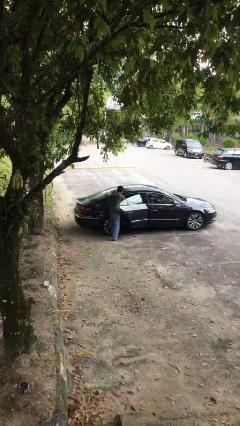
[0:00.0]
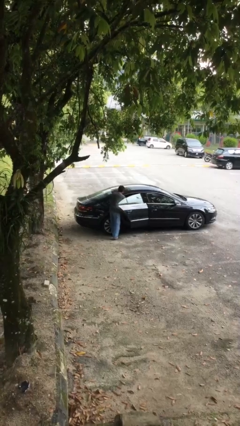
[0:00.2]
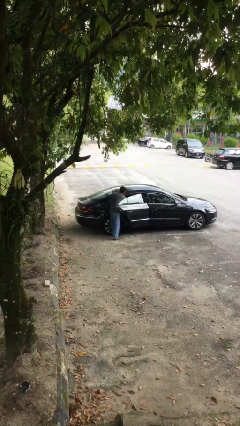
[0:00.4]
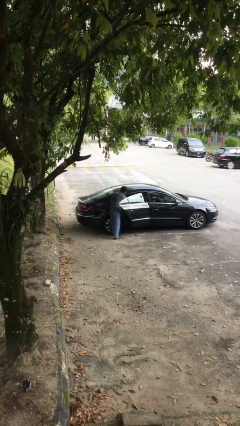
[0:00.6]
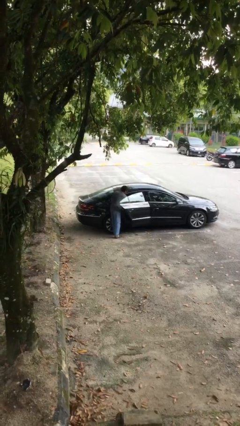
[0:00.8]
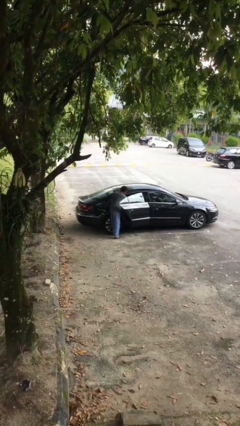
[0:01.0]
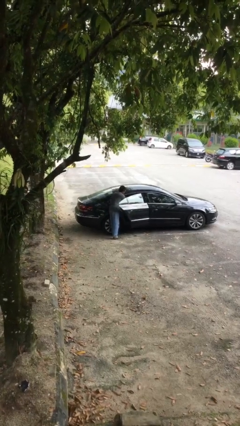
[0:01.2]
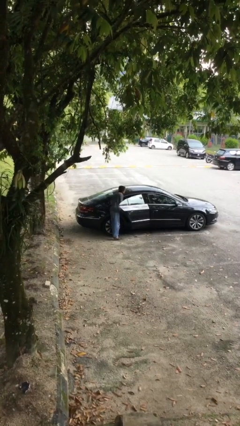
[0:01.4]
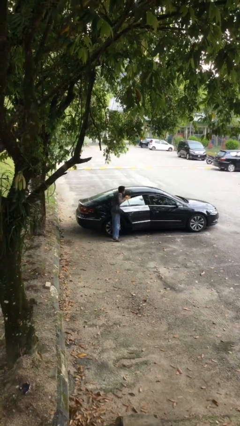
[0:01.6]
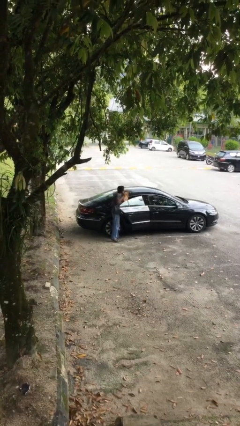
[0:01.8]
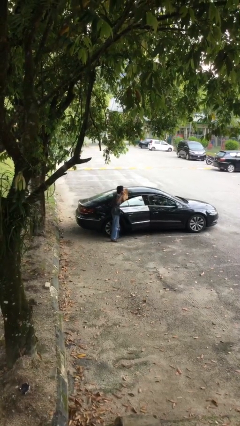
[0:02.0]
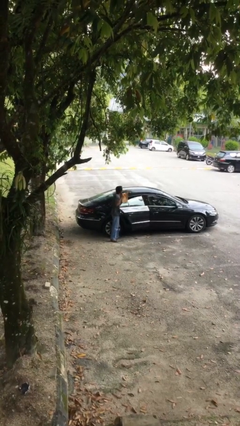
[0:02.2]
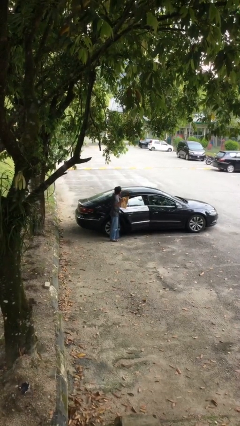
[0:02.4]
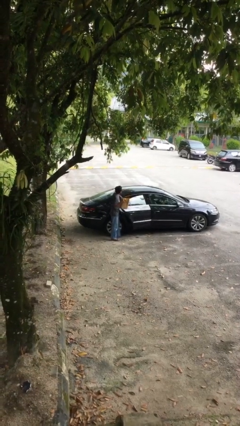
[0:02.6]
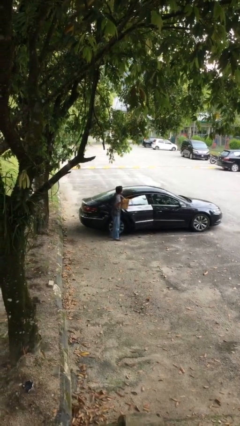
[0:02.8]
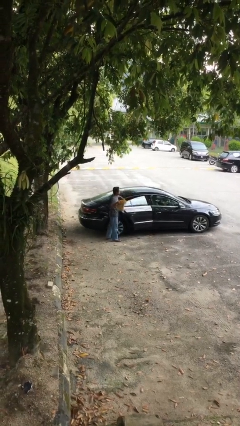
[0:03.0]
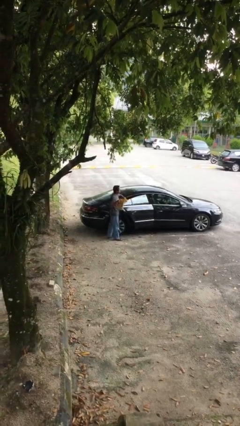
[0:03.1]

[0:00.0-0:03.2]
person unloads car

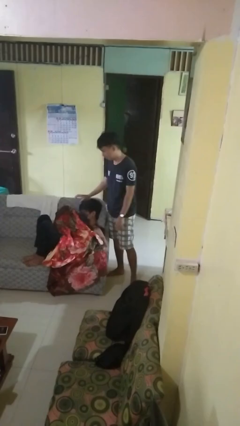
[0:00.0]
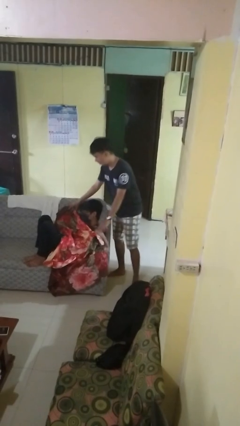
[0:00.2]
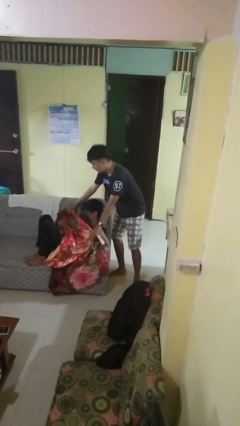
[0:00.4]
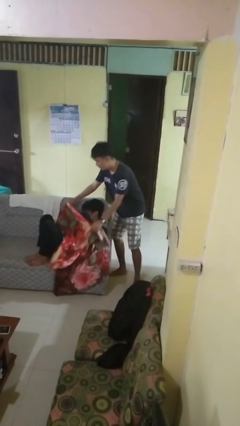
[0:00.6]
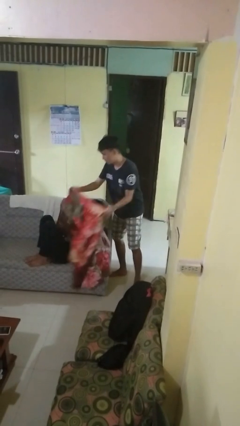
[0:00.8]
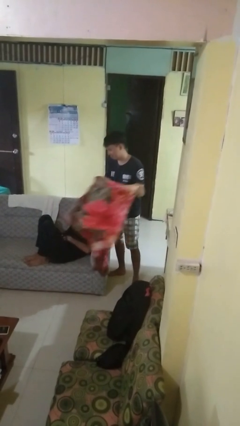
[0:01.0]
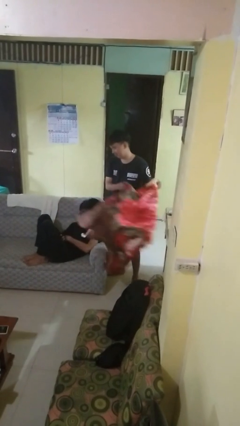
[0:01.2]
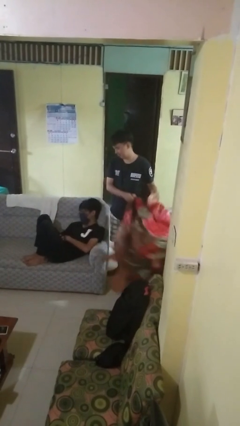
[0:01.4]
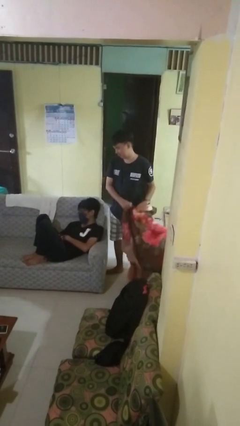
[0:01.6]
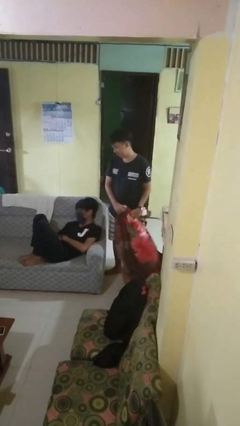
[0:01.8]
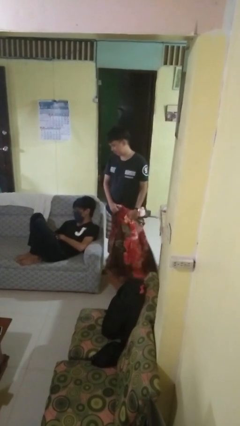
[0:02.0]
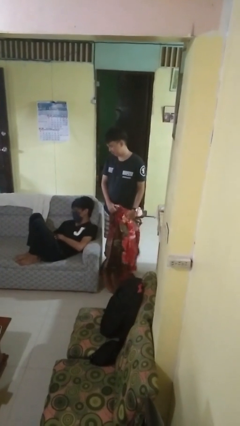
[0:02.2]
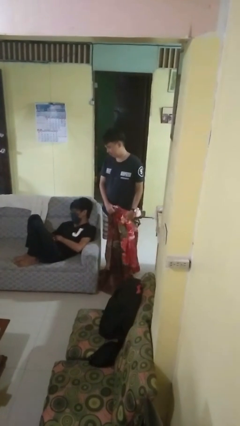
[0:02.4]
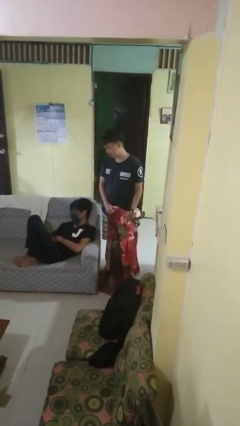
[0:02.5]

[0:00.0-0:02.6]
person uncovers friend with blanket

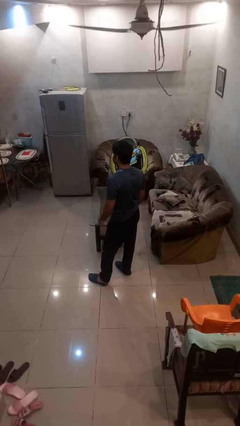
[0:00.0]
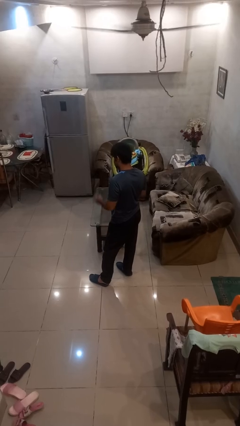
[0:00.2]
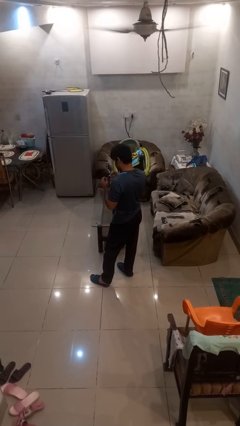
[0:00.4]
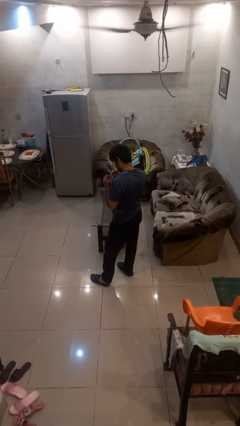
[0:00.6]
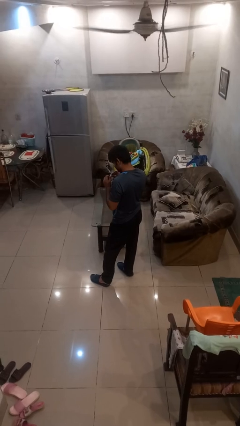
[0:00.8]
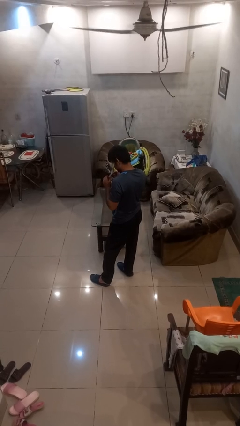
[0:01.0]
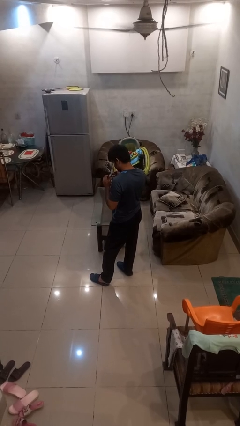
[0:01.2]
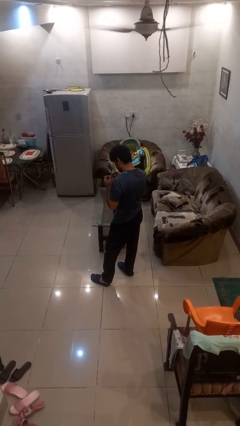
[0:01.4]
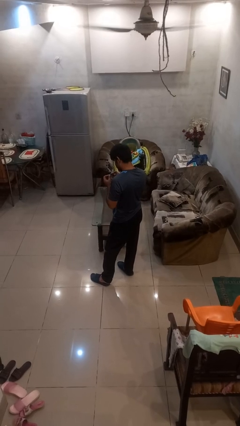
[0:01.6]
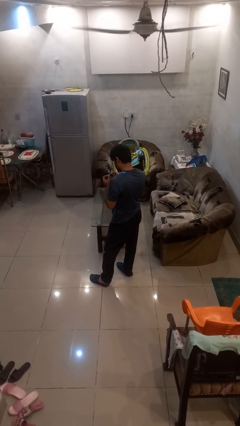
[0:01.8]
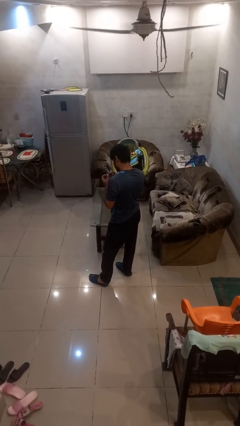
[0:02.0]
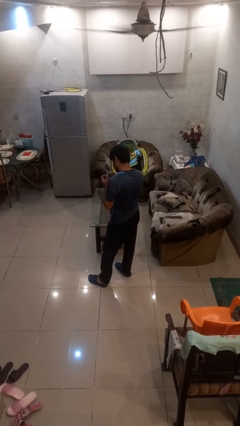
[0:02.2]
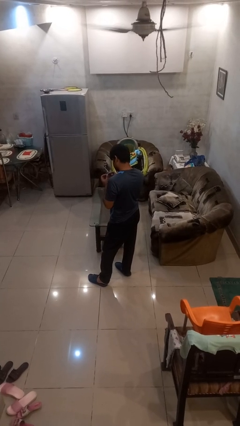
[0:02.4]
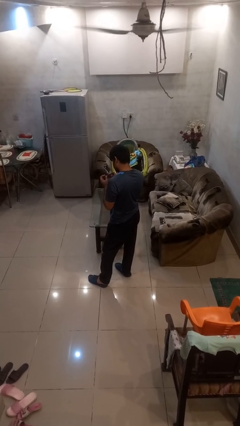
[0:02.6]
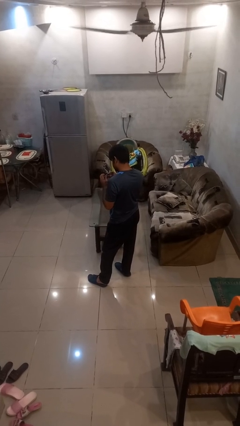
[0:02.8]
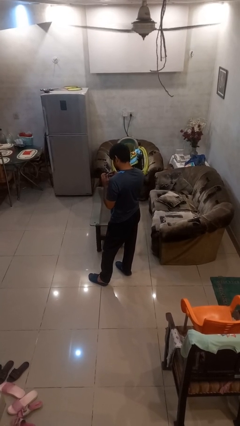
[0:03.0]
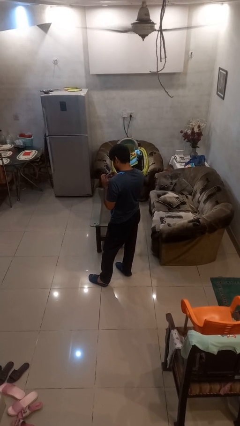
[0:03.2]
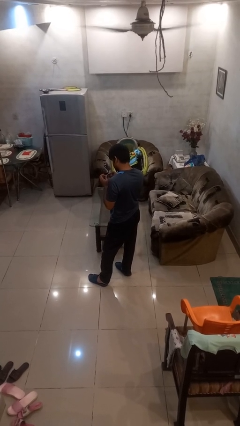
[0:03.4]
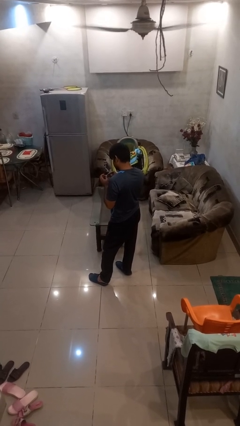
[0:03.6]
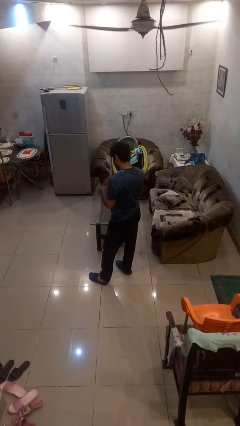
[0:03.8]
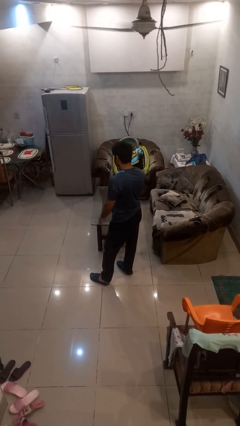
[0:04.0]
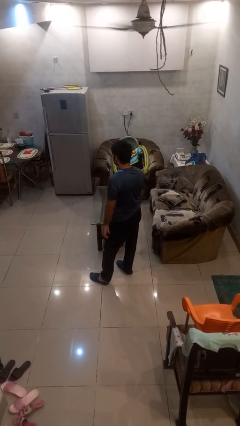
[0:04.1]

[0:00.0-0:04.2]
person clips fingernails

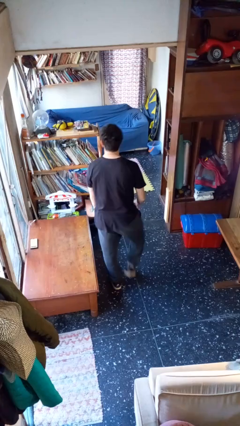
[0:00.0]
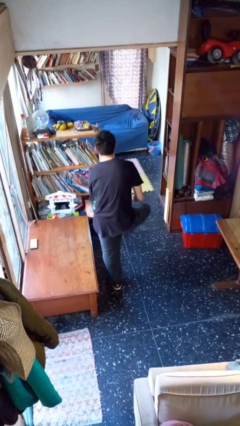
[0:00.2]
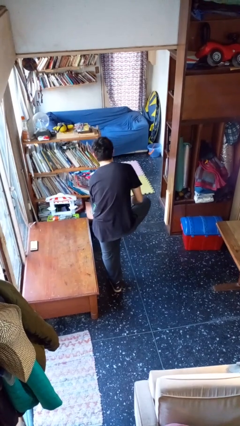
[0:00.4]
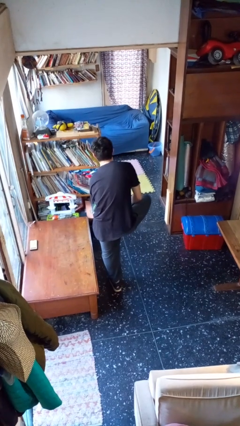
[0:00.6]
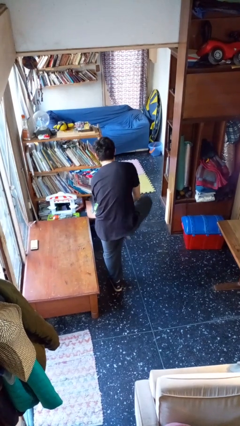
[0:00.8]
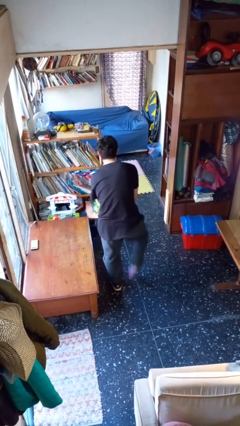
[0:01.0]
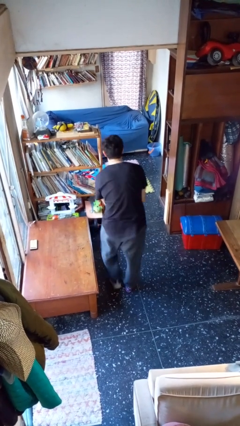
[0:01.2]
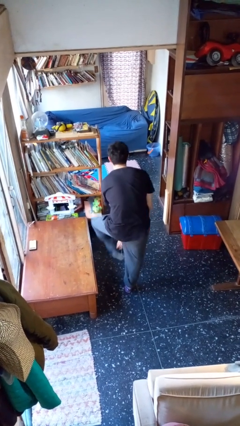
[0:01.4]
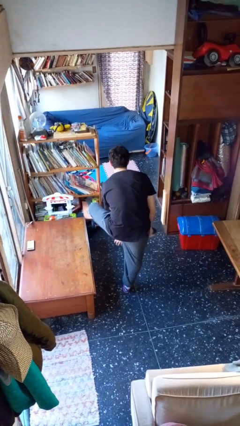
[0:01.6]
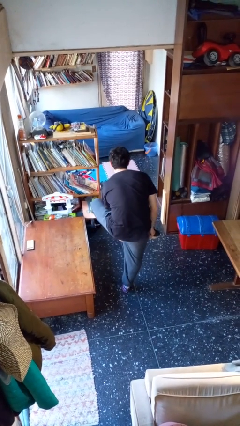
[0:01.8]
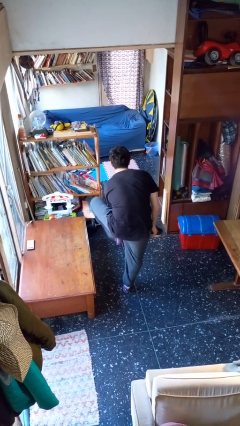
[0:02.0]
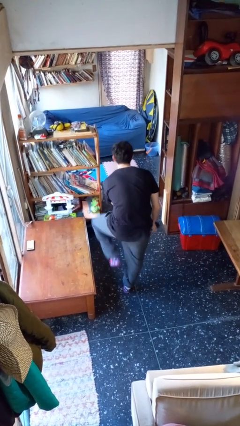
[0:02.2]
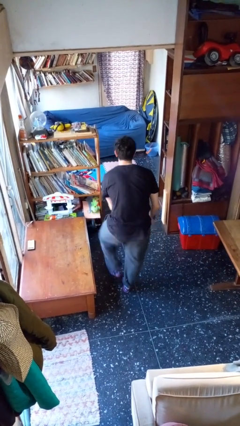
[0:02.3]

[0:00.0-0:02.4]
person takes off shoes

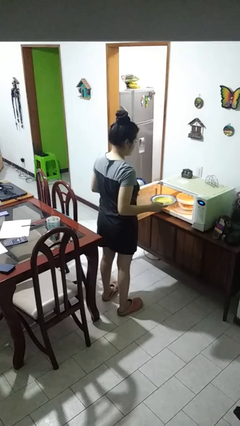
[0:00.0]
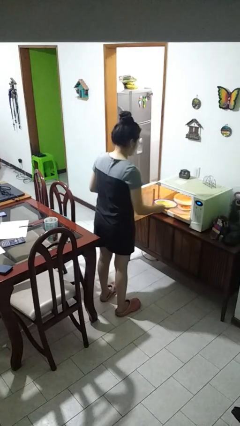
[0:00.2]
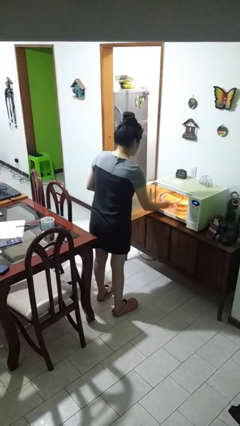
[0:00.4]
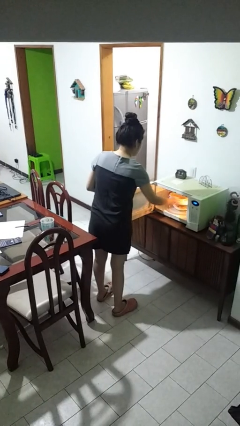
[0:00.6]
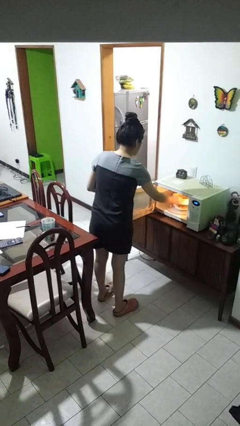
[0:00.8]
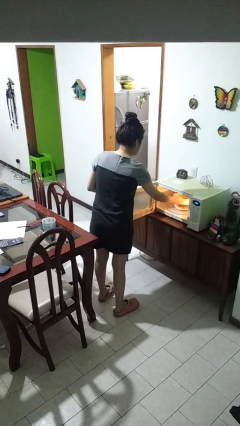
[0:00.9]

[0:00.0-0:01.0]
person puts object into microwave

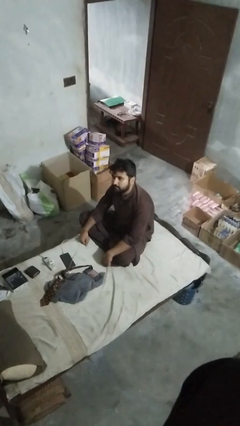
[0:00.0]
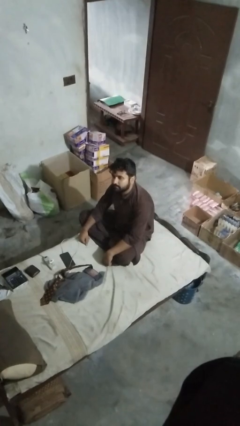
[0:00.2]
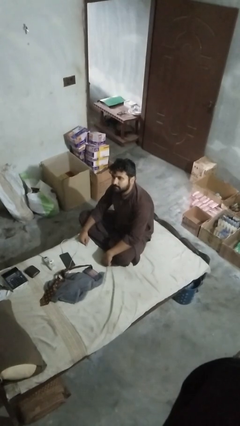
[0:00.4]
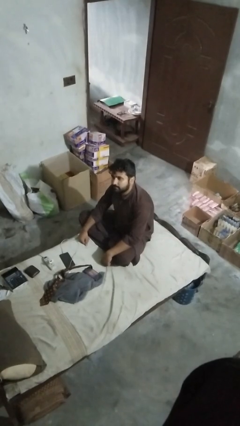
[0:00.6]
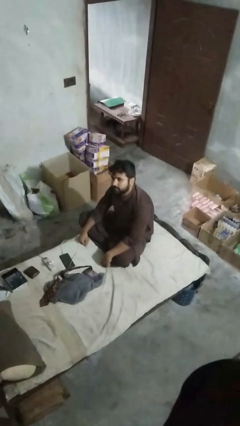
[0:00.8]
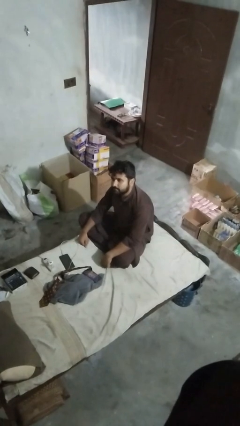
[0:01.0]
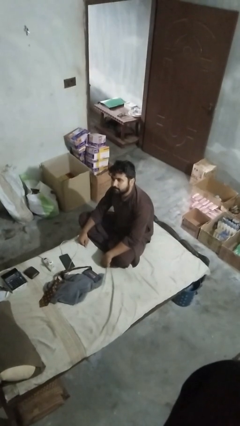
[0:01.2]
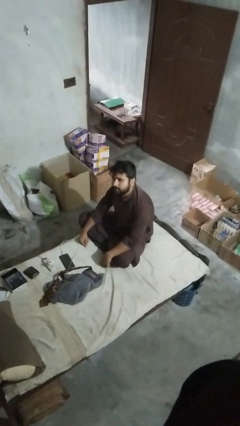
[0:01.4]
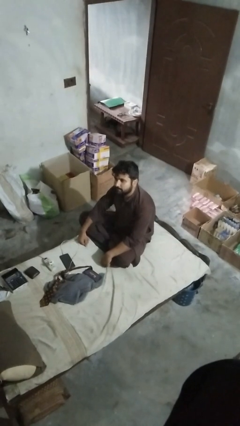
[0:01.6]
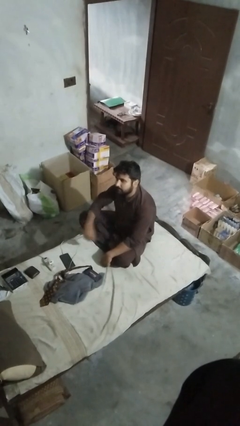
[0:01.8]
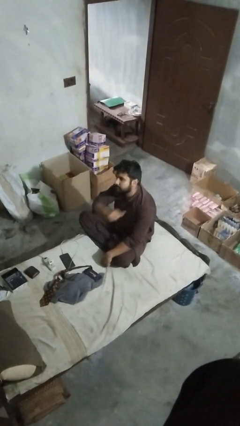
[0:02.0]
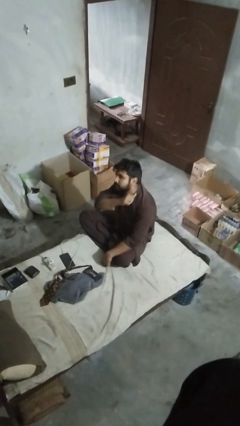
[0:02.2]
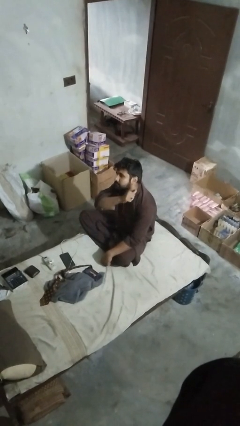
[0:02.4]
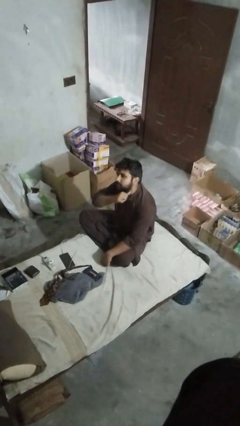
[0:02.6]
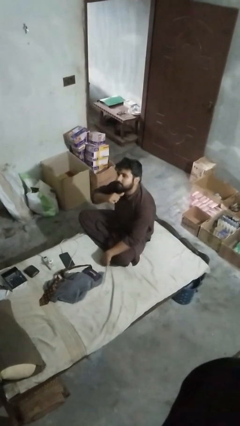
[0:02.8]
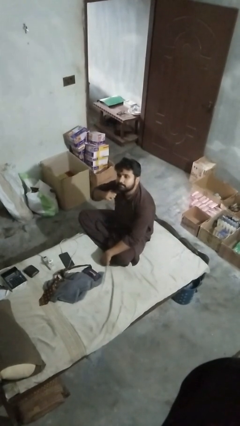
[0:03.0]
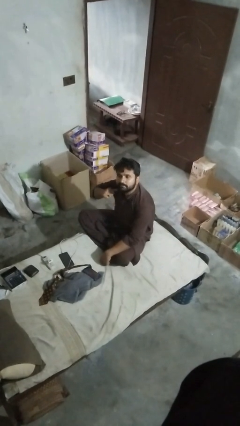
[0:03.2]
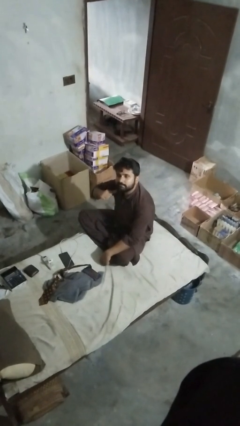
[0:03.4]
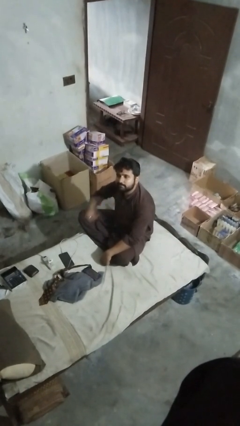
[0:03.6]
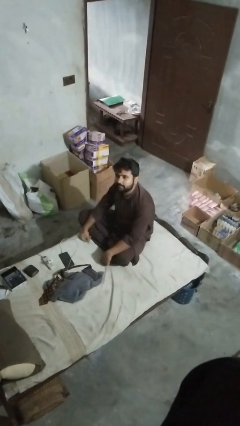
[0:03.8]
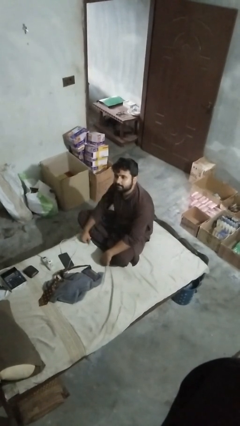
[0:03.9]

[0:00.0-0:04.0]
person gestures cut
